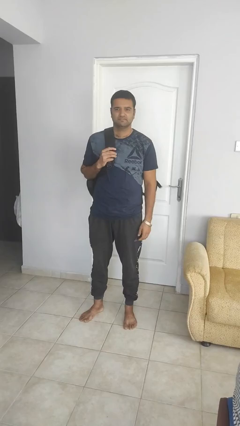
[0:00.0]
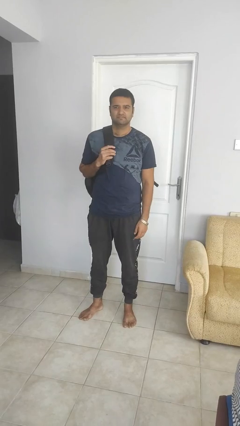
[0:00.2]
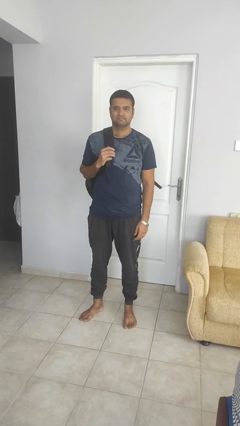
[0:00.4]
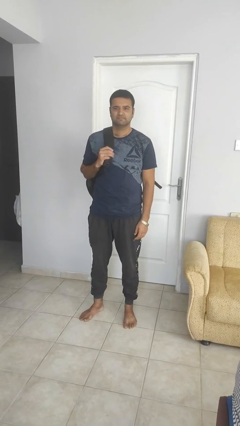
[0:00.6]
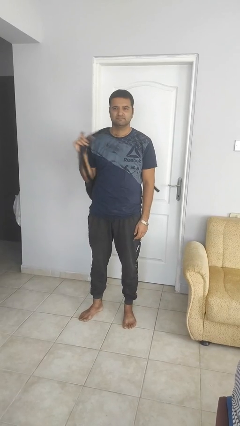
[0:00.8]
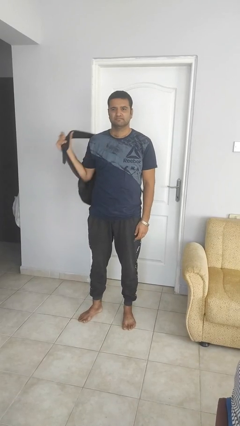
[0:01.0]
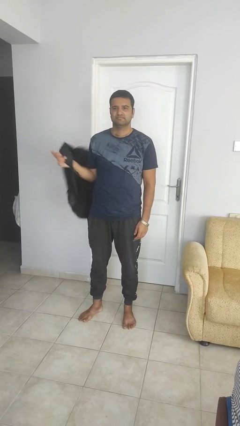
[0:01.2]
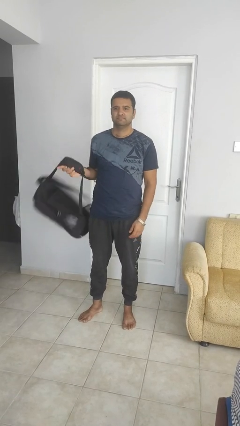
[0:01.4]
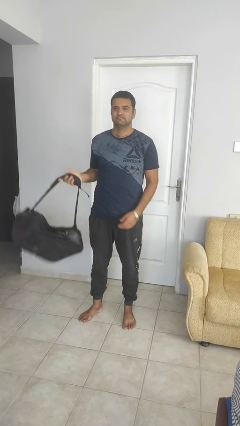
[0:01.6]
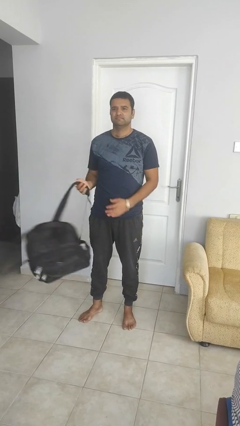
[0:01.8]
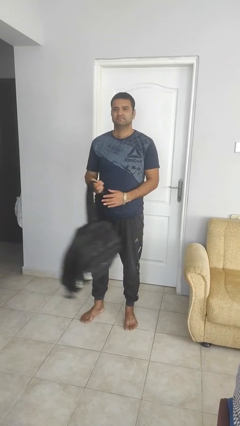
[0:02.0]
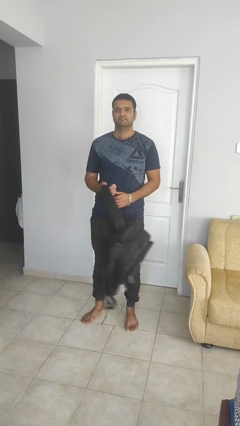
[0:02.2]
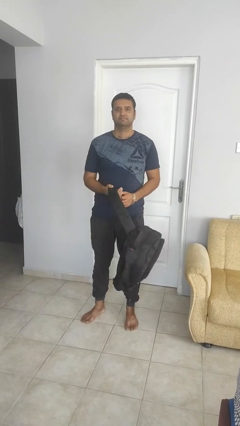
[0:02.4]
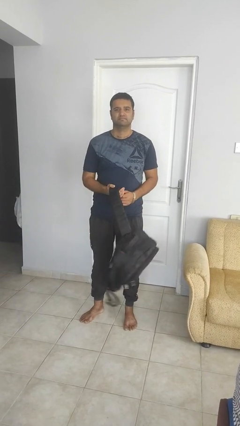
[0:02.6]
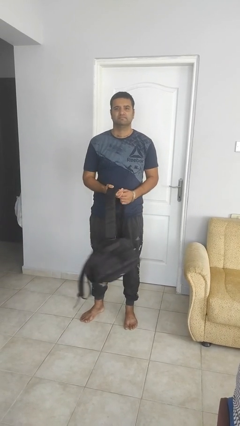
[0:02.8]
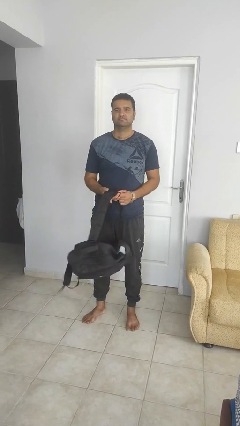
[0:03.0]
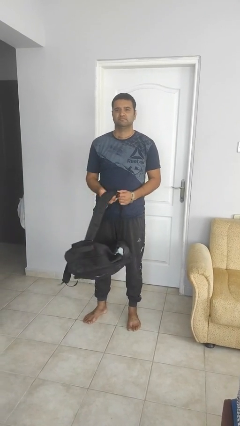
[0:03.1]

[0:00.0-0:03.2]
person takes off backpack

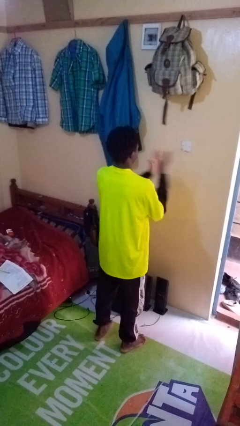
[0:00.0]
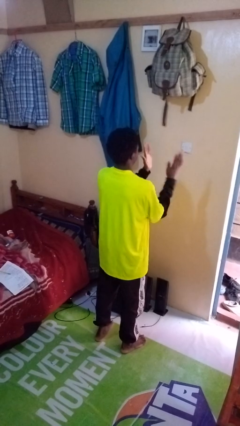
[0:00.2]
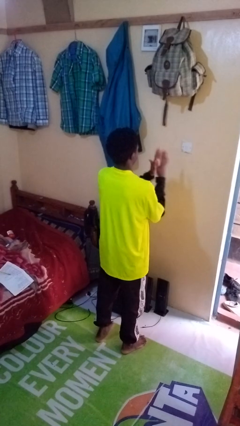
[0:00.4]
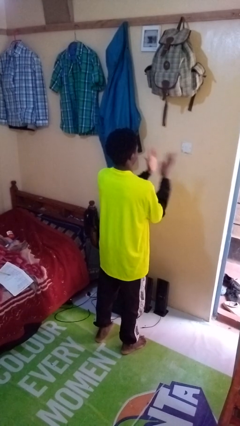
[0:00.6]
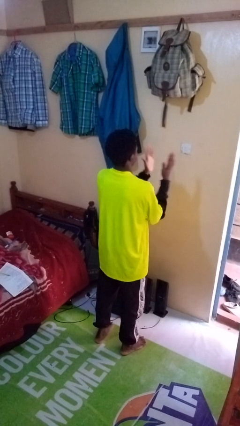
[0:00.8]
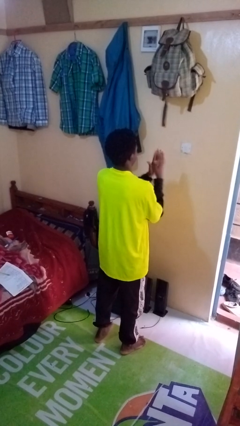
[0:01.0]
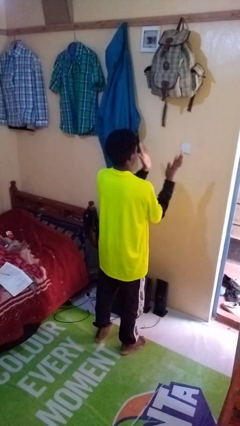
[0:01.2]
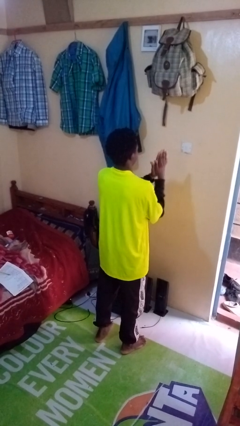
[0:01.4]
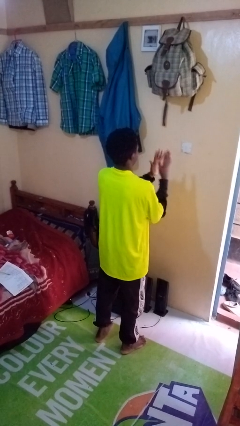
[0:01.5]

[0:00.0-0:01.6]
person claps hands

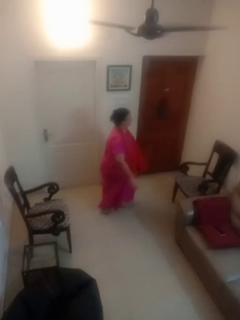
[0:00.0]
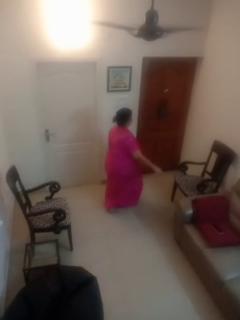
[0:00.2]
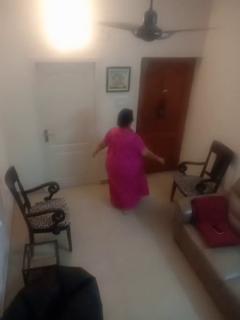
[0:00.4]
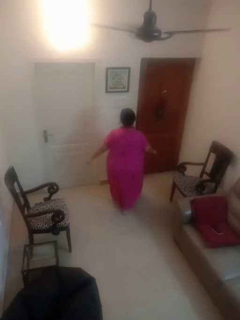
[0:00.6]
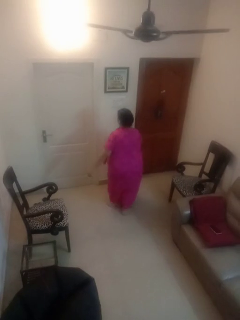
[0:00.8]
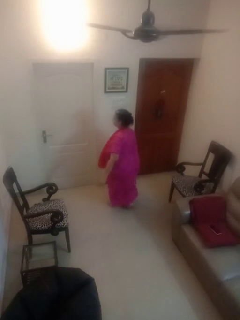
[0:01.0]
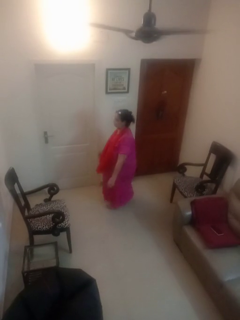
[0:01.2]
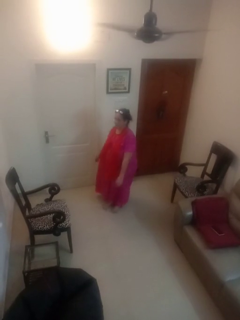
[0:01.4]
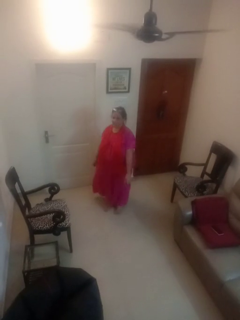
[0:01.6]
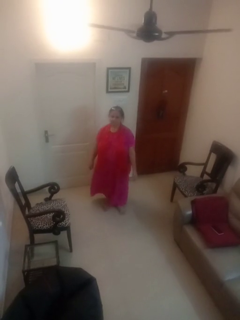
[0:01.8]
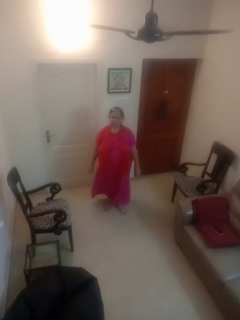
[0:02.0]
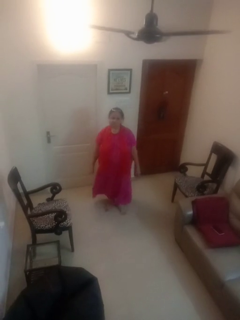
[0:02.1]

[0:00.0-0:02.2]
person twirls

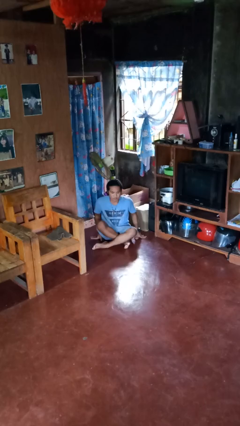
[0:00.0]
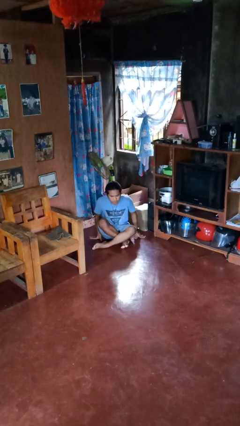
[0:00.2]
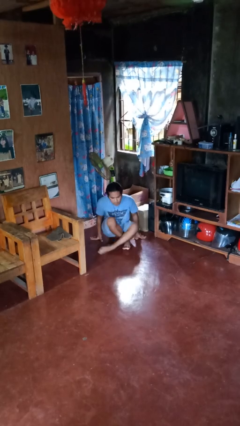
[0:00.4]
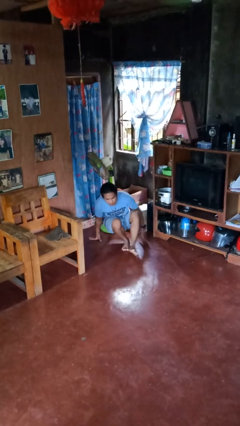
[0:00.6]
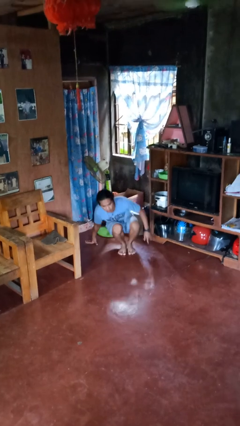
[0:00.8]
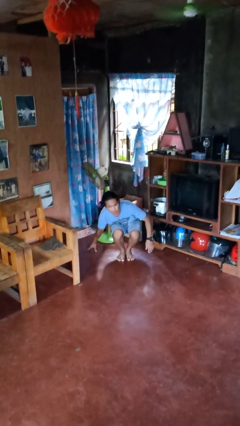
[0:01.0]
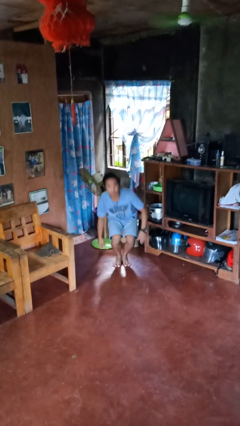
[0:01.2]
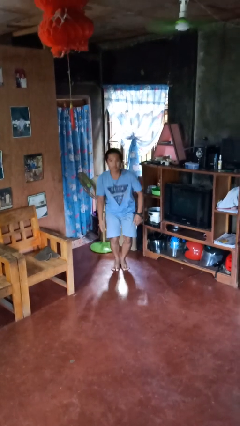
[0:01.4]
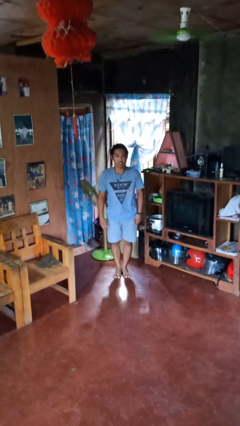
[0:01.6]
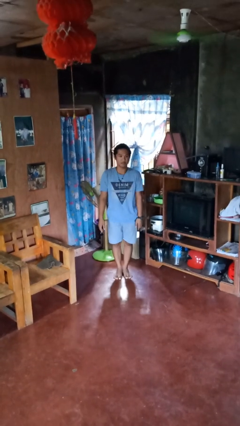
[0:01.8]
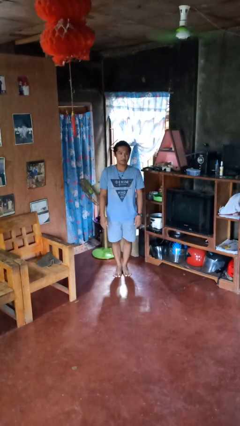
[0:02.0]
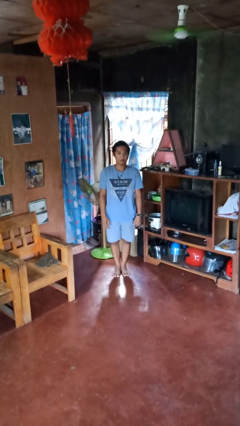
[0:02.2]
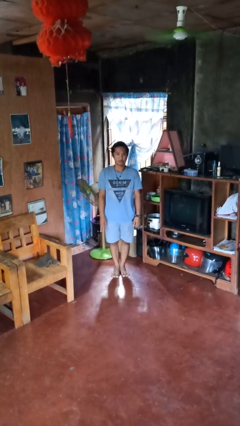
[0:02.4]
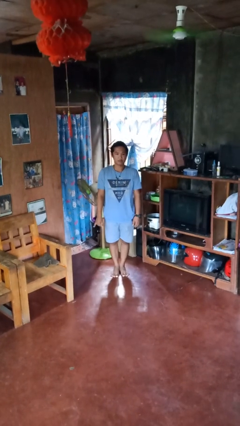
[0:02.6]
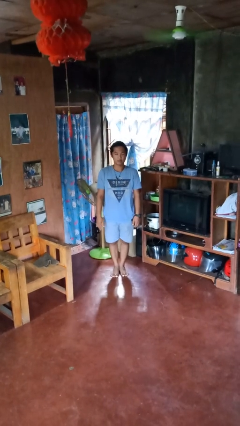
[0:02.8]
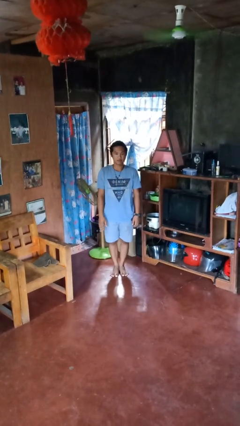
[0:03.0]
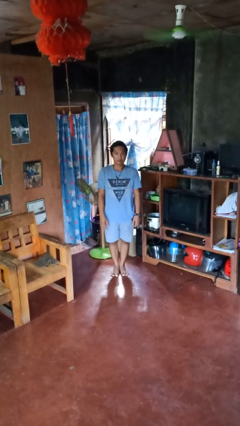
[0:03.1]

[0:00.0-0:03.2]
person stands up from floor

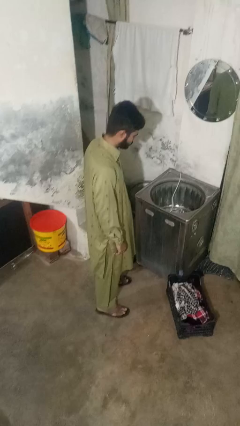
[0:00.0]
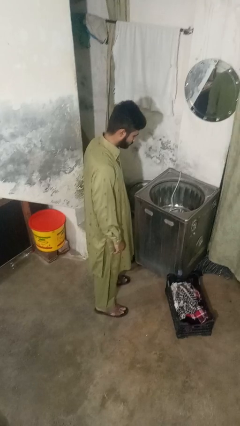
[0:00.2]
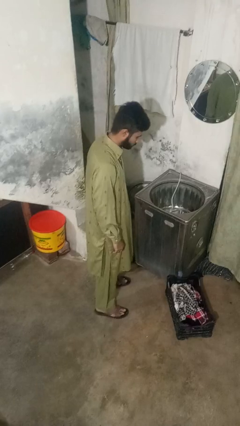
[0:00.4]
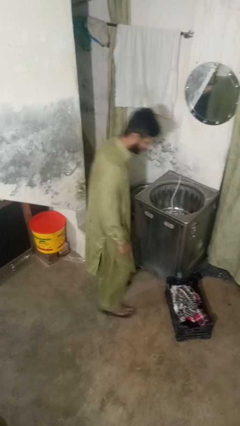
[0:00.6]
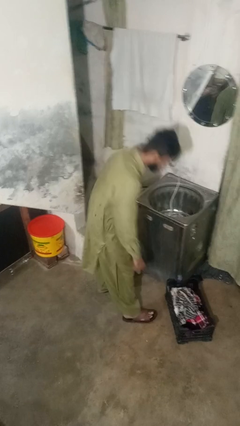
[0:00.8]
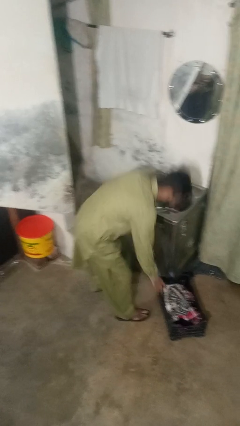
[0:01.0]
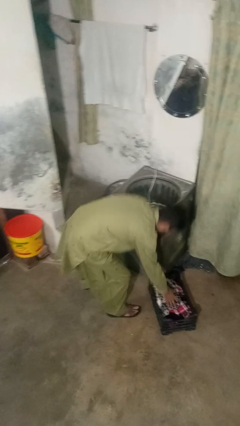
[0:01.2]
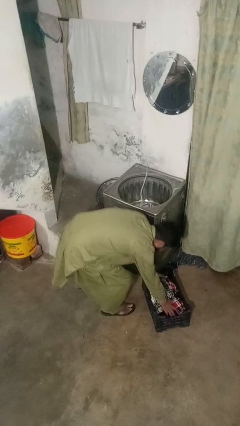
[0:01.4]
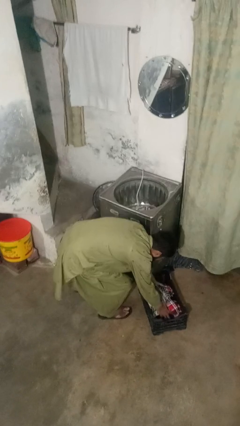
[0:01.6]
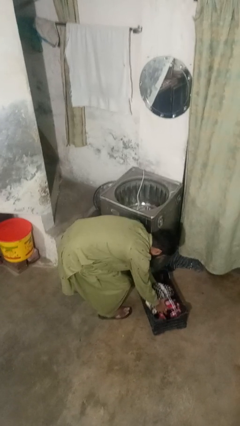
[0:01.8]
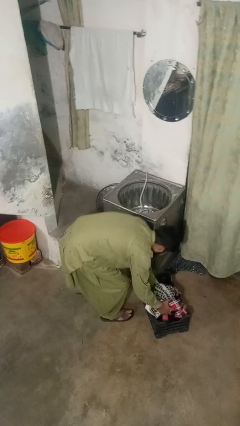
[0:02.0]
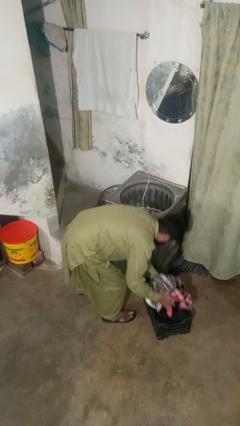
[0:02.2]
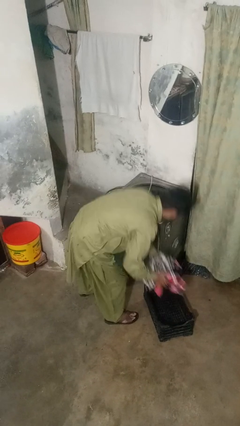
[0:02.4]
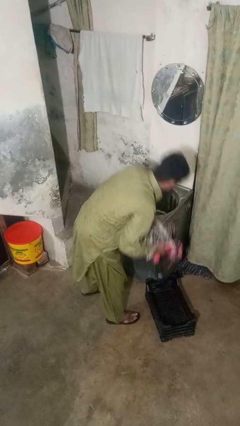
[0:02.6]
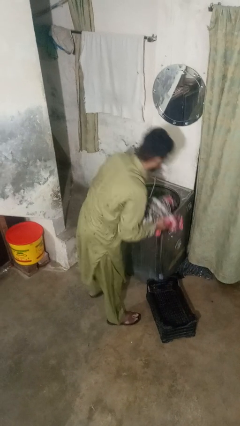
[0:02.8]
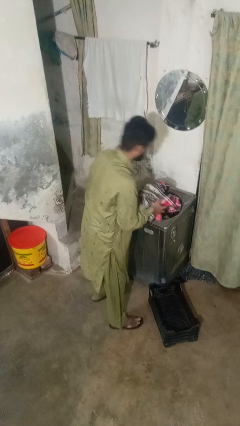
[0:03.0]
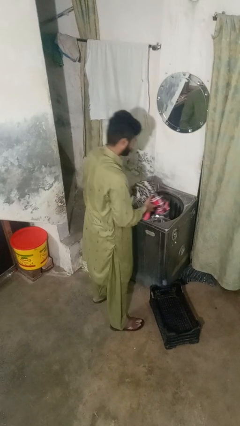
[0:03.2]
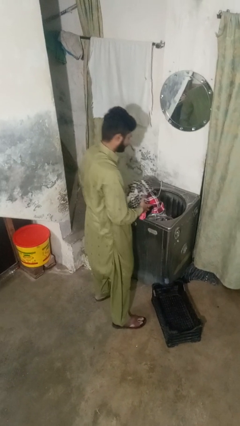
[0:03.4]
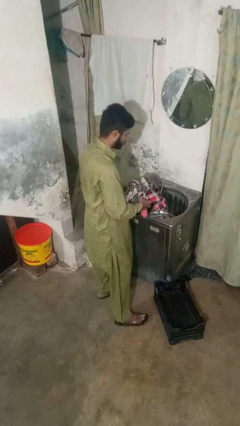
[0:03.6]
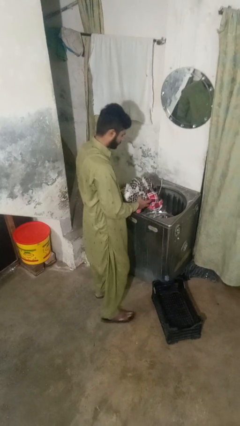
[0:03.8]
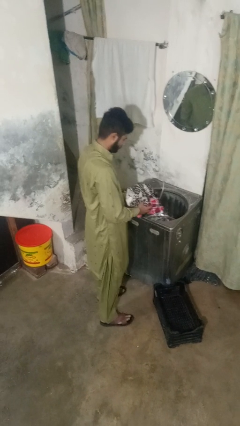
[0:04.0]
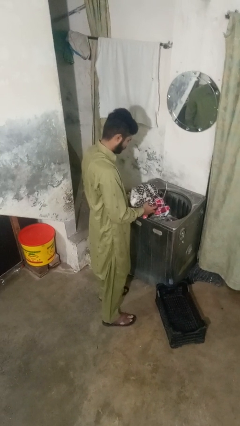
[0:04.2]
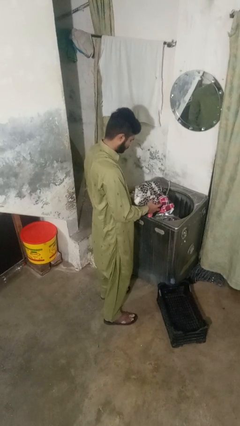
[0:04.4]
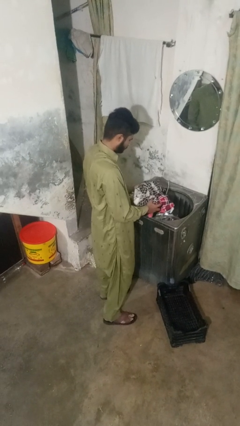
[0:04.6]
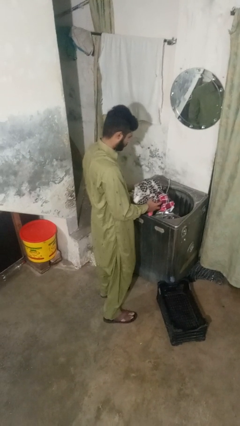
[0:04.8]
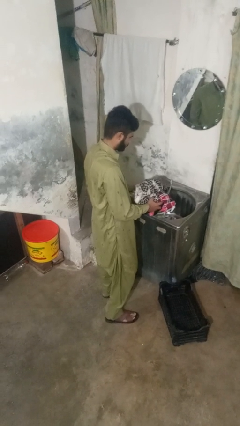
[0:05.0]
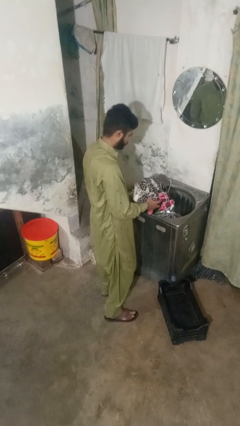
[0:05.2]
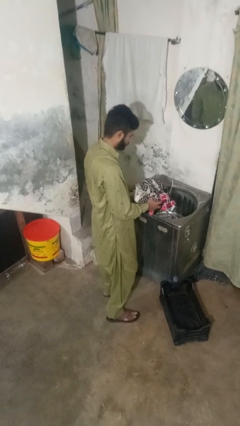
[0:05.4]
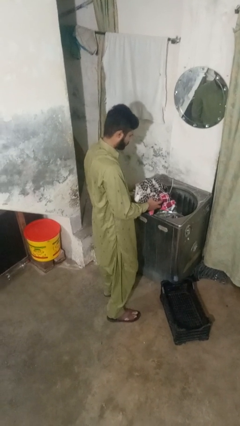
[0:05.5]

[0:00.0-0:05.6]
person unloads clotheswasher

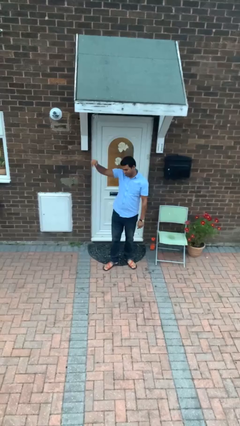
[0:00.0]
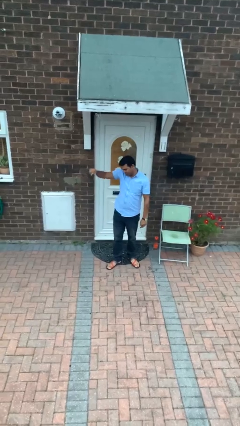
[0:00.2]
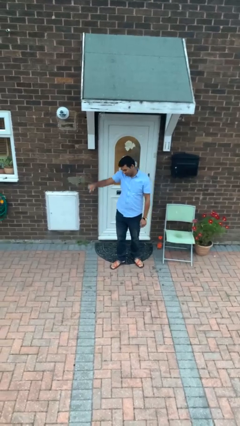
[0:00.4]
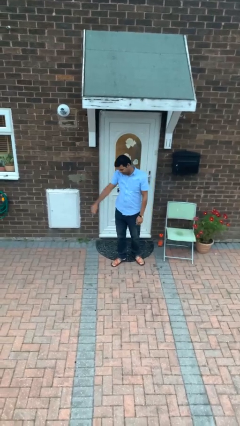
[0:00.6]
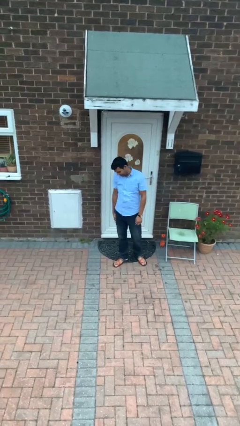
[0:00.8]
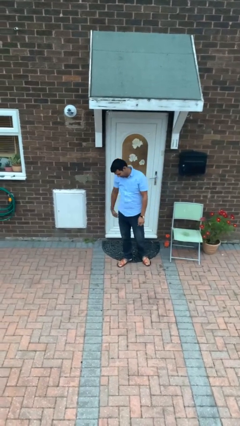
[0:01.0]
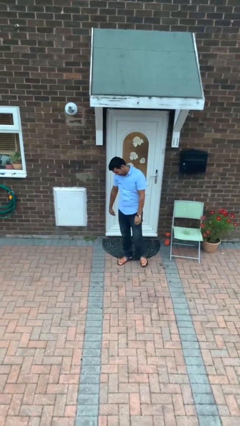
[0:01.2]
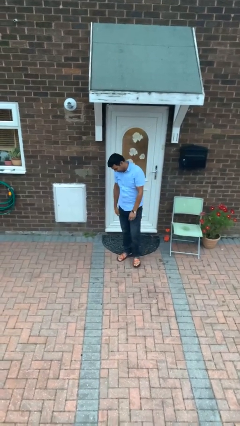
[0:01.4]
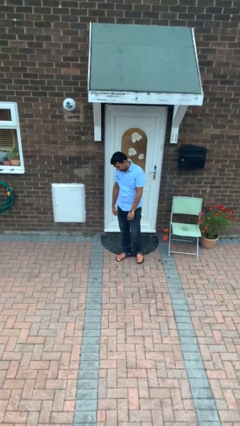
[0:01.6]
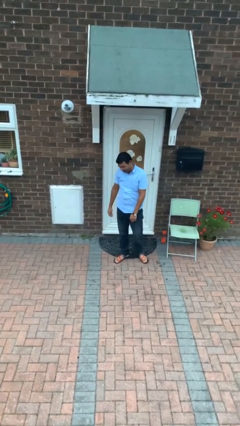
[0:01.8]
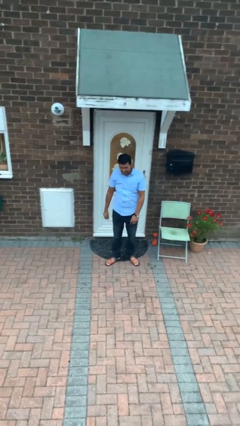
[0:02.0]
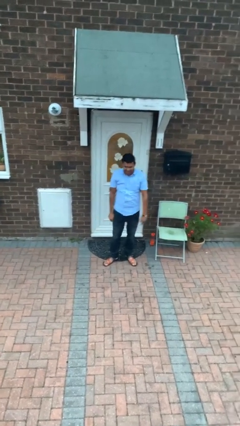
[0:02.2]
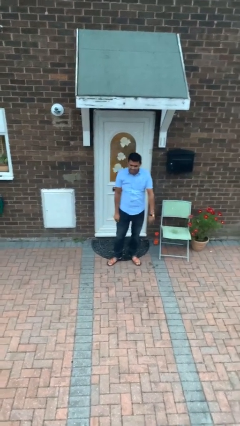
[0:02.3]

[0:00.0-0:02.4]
person gestures lower hand
